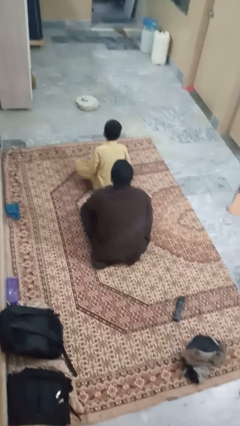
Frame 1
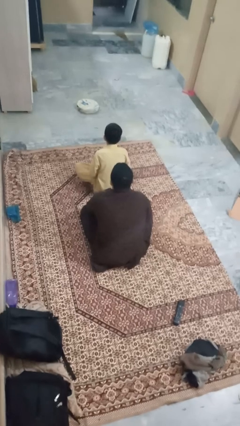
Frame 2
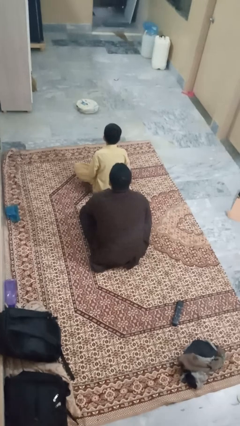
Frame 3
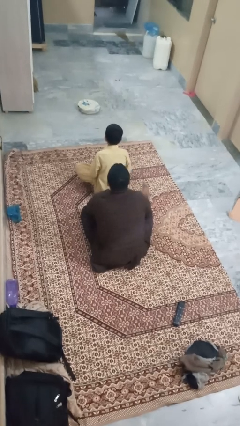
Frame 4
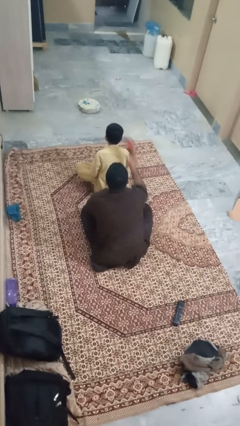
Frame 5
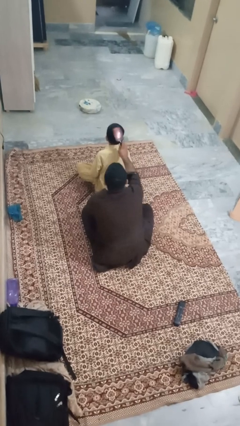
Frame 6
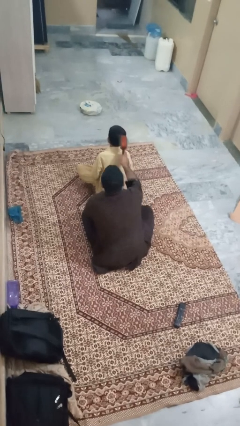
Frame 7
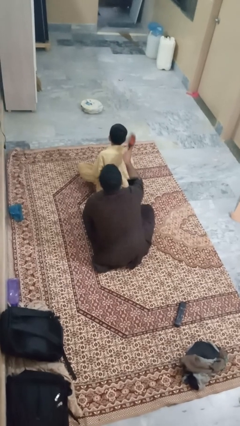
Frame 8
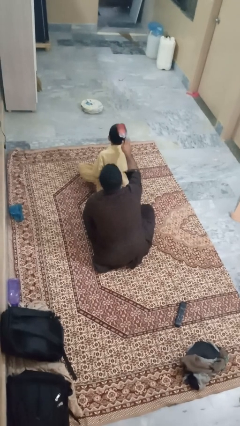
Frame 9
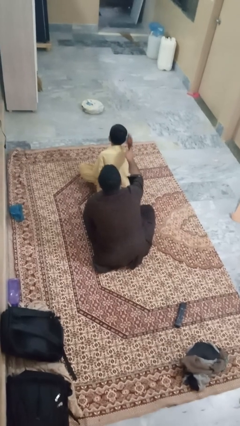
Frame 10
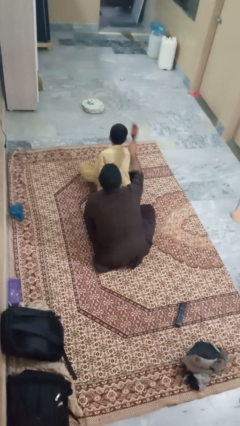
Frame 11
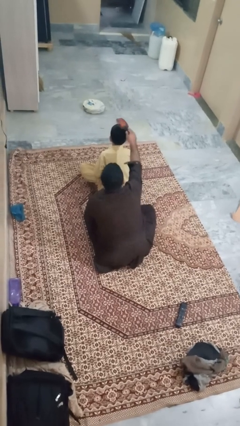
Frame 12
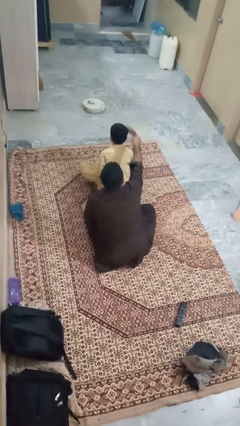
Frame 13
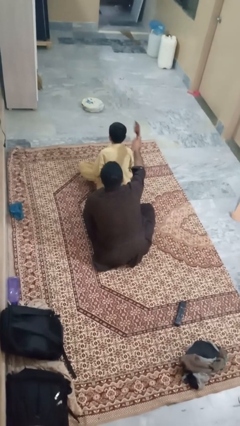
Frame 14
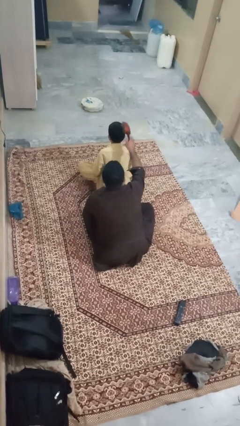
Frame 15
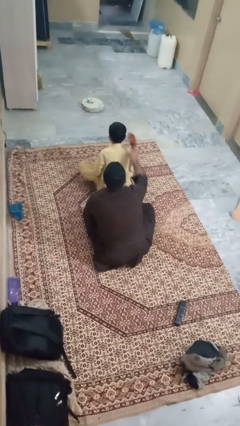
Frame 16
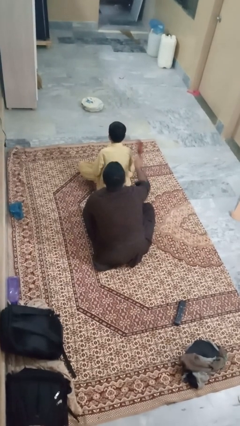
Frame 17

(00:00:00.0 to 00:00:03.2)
person brushes hair of person

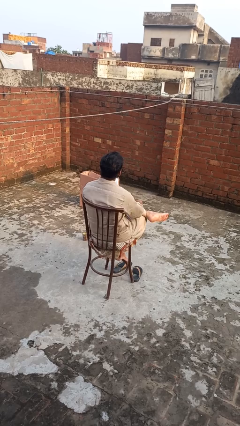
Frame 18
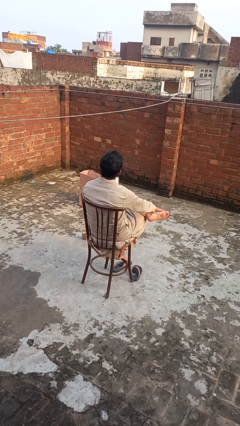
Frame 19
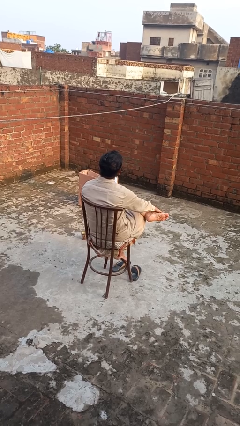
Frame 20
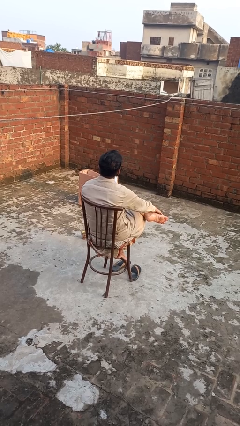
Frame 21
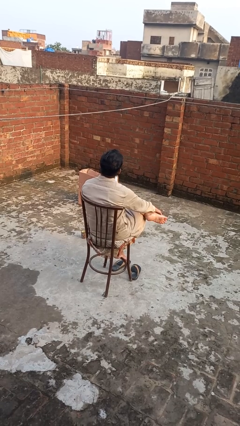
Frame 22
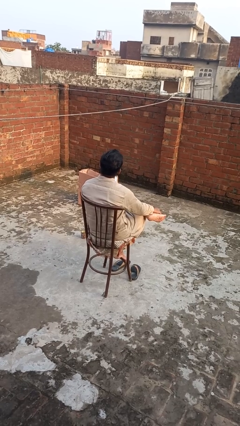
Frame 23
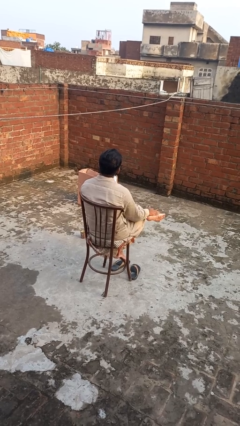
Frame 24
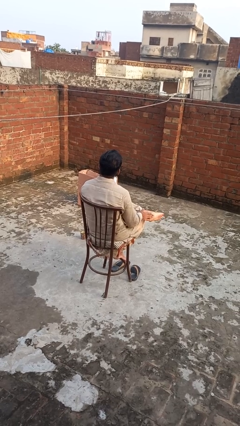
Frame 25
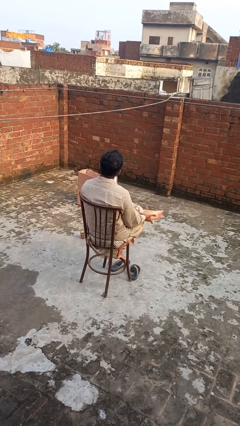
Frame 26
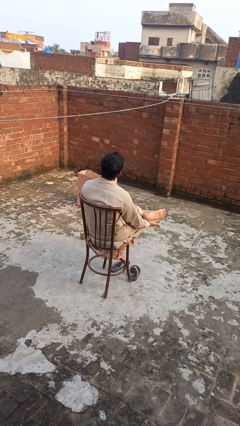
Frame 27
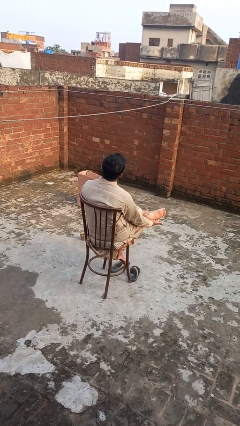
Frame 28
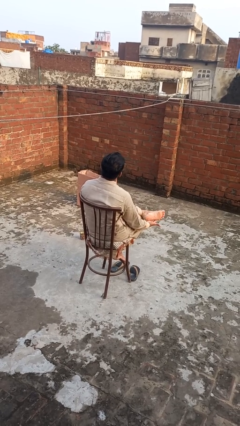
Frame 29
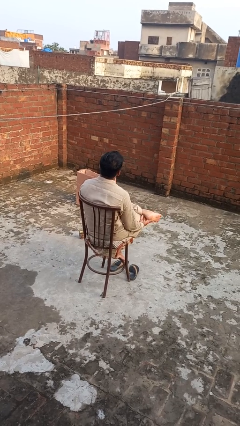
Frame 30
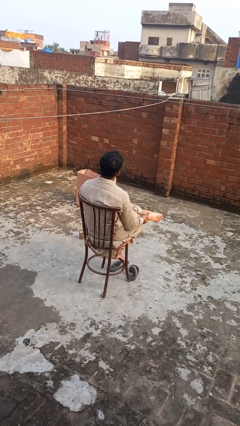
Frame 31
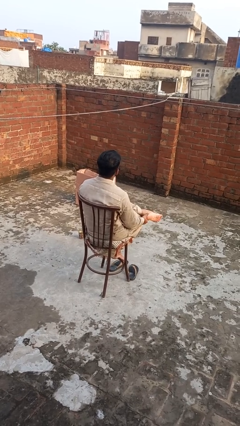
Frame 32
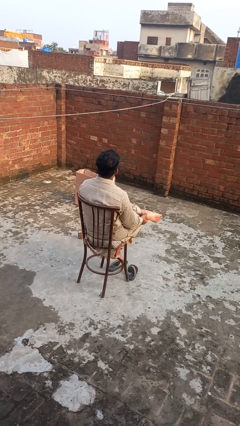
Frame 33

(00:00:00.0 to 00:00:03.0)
person rubs foot

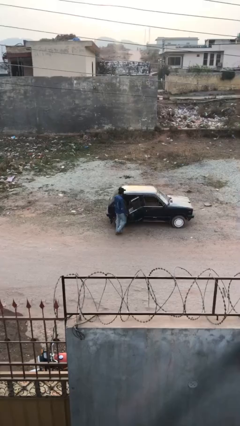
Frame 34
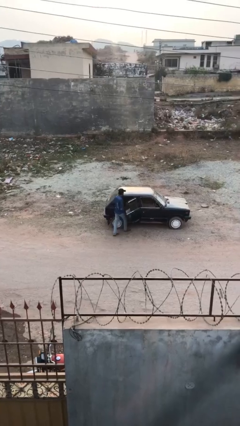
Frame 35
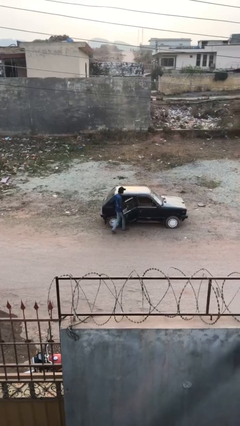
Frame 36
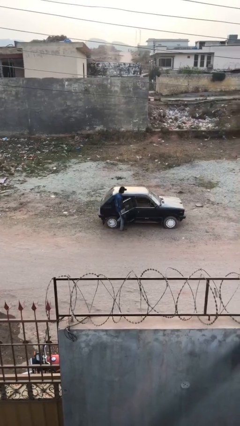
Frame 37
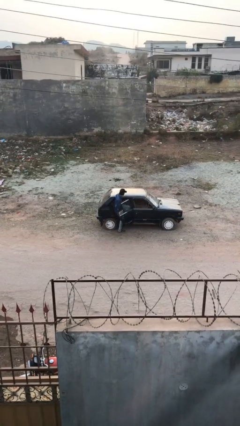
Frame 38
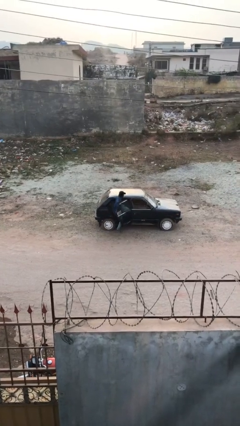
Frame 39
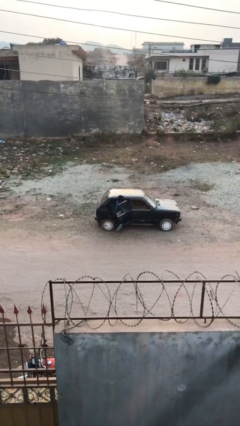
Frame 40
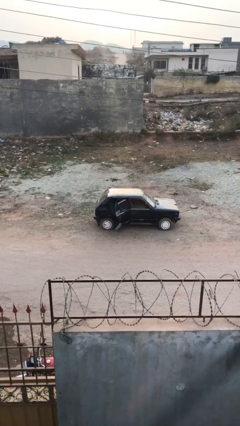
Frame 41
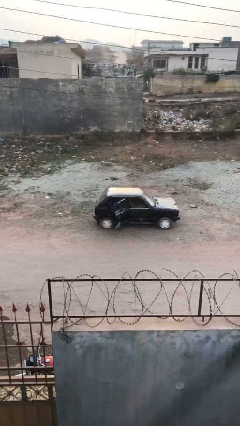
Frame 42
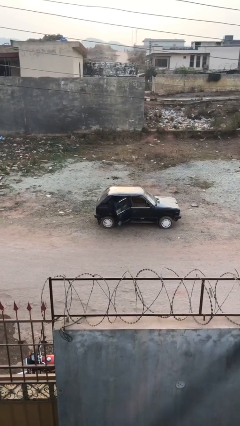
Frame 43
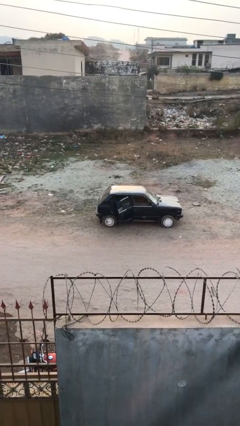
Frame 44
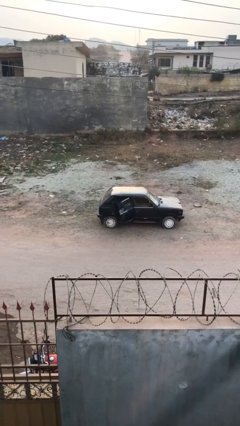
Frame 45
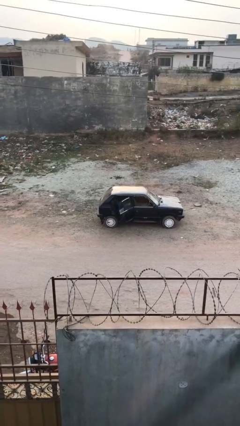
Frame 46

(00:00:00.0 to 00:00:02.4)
person enters car

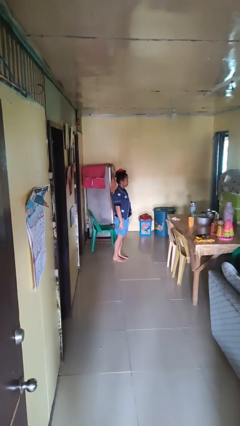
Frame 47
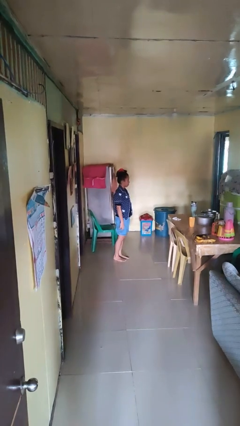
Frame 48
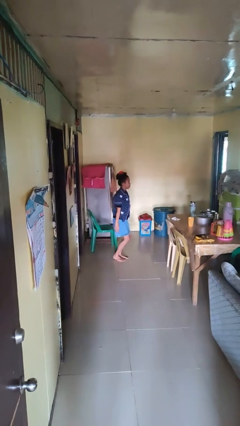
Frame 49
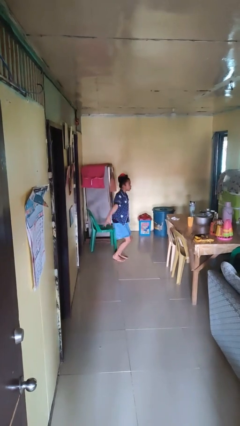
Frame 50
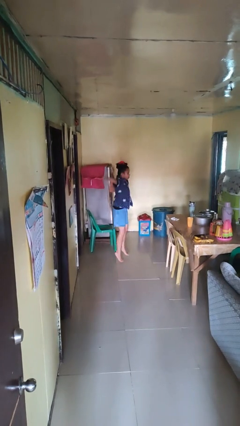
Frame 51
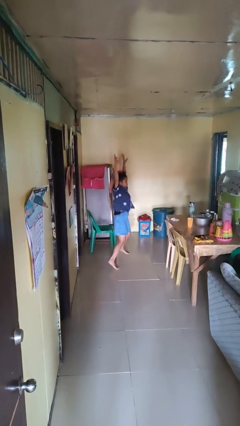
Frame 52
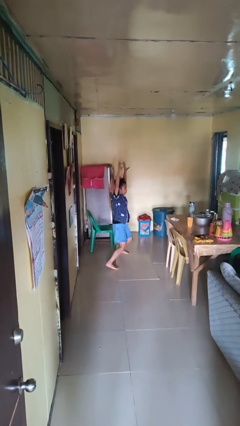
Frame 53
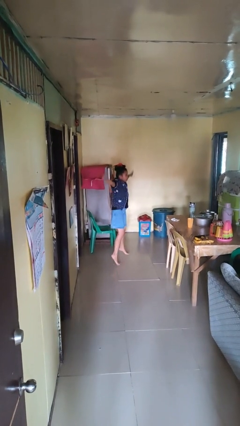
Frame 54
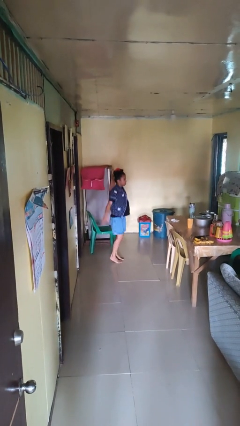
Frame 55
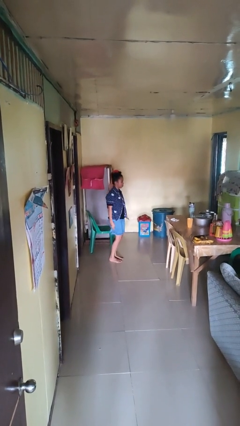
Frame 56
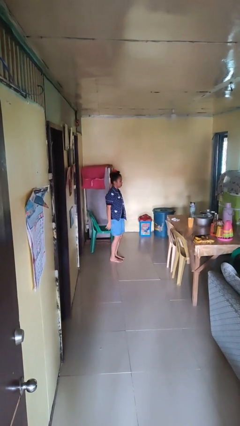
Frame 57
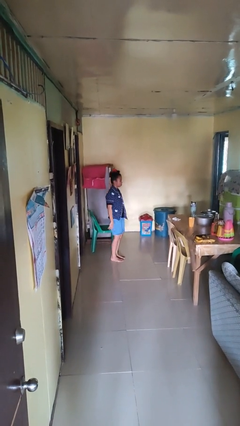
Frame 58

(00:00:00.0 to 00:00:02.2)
person exercises with jumping jacks

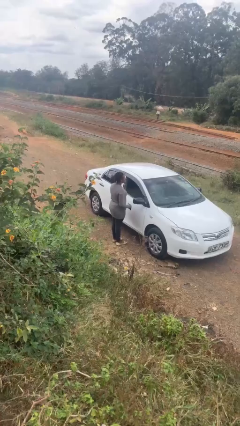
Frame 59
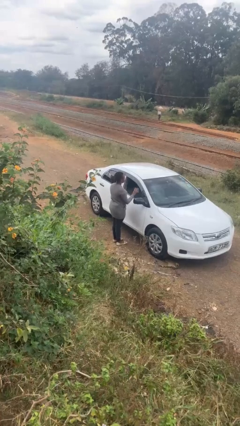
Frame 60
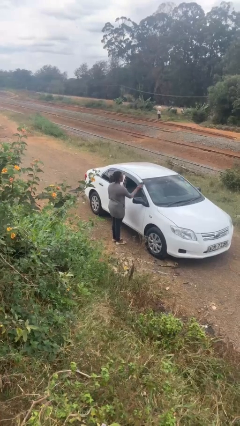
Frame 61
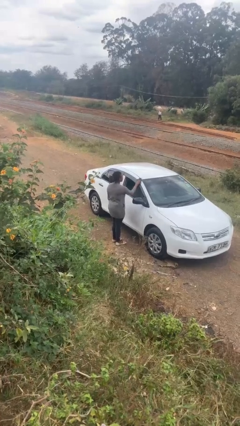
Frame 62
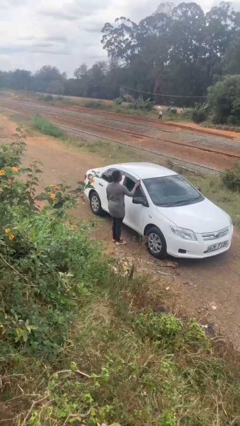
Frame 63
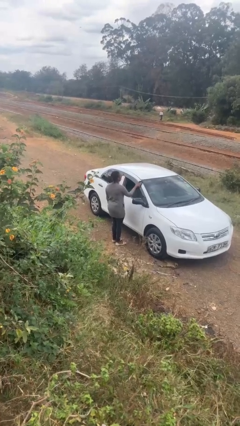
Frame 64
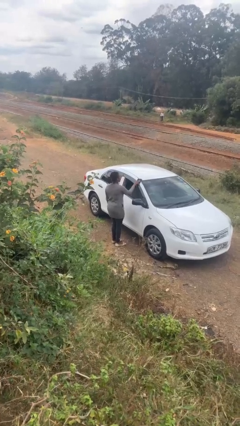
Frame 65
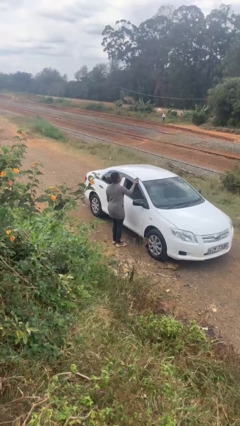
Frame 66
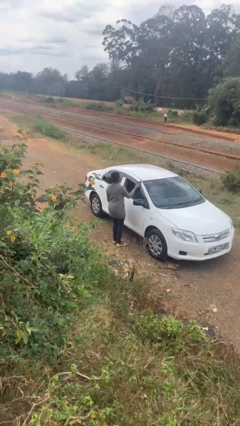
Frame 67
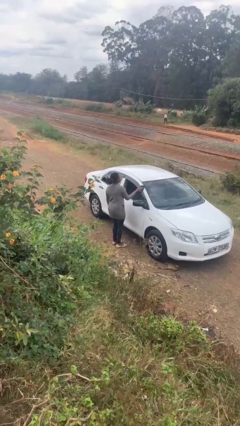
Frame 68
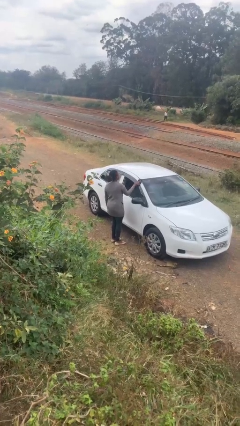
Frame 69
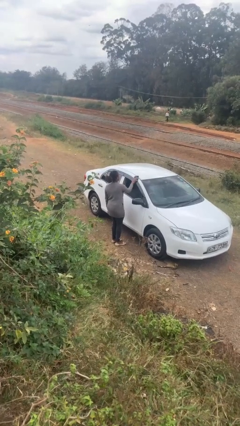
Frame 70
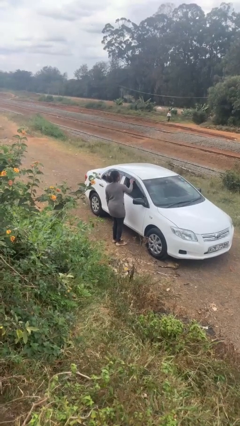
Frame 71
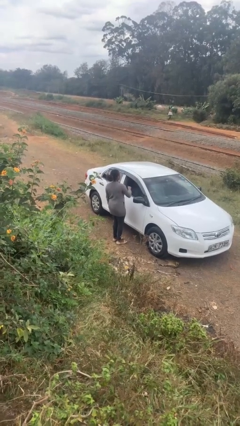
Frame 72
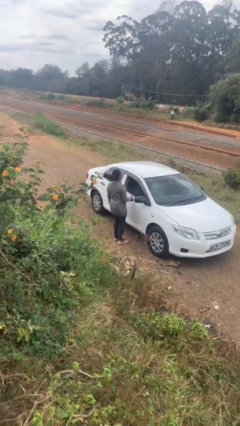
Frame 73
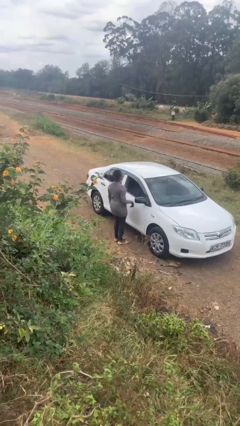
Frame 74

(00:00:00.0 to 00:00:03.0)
person polishes car with rag

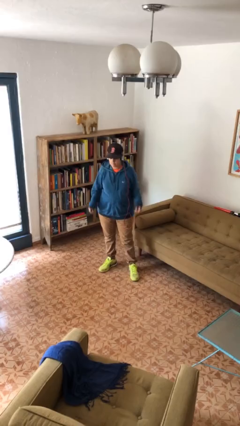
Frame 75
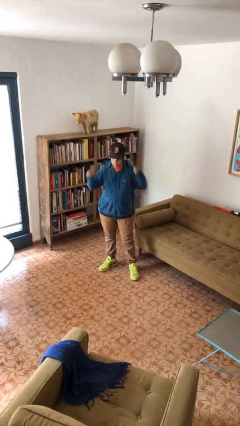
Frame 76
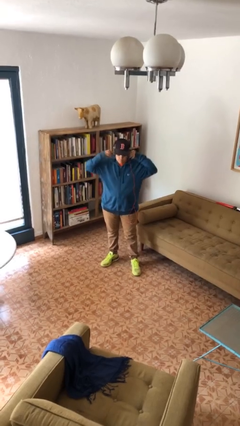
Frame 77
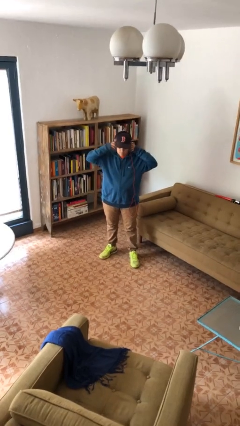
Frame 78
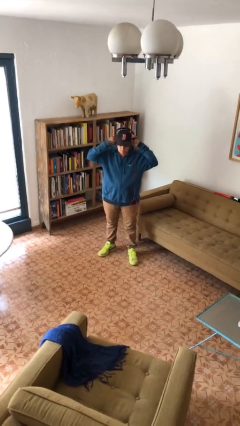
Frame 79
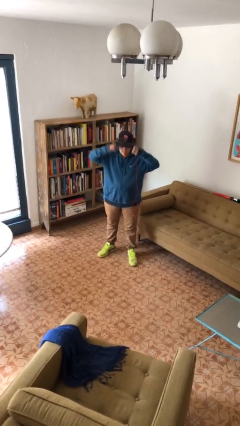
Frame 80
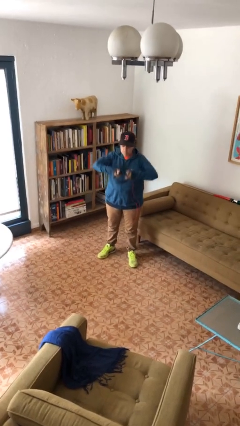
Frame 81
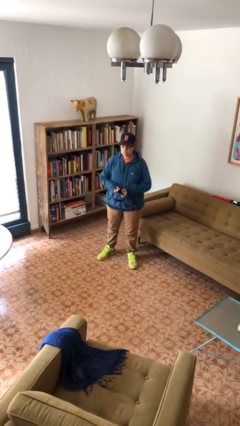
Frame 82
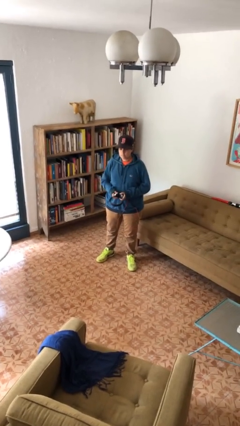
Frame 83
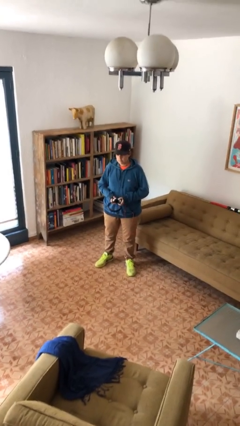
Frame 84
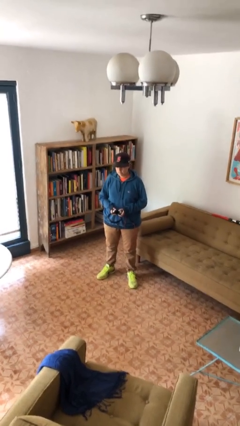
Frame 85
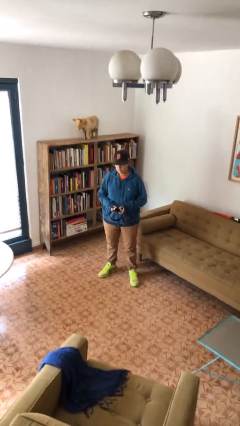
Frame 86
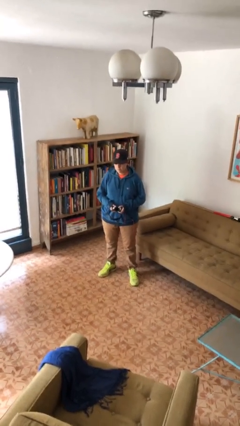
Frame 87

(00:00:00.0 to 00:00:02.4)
person takes off headphones

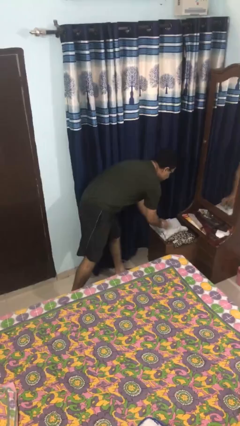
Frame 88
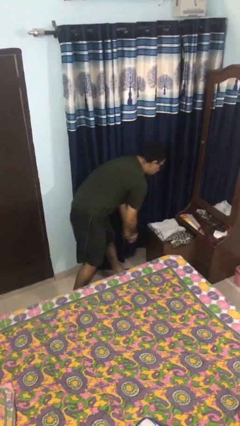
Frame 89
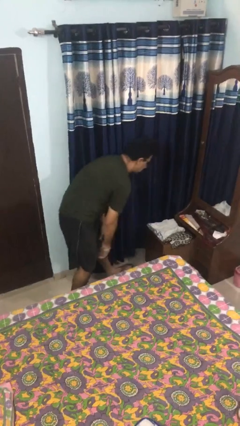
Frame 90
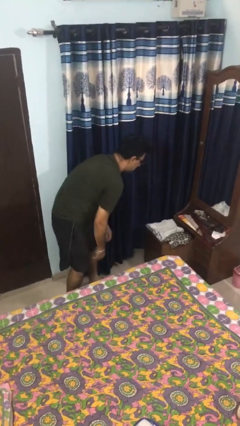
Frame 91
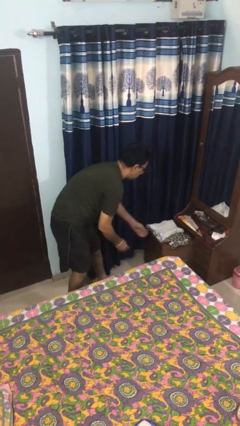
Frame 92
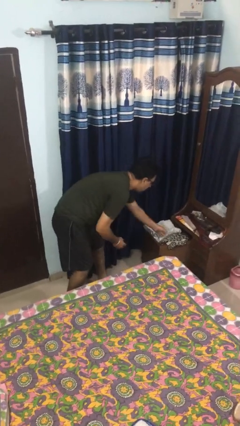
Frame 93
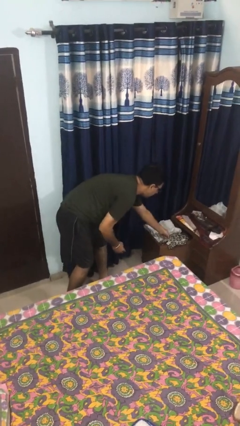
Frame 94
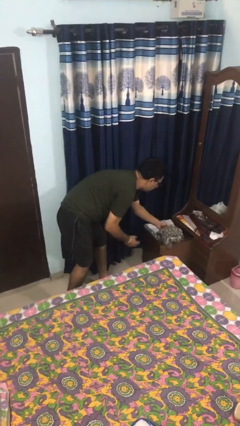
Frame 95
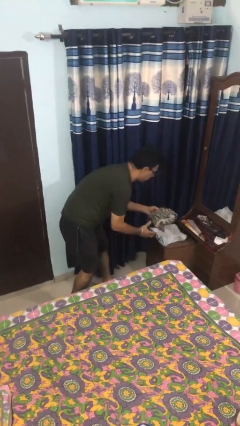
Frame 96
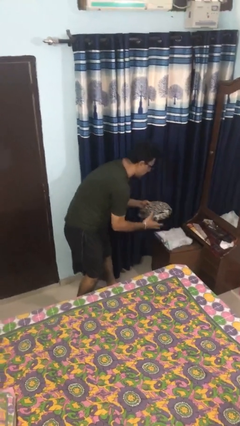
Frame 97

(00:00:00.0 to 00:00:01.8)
person takes clothes from dresser
